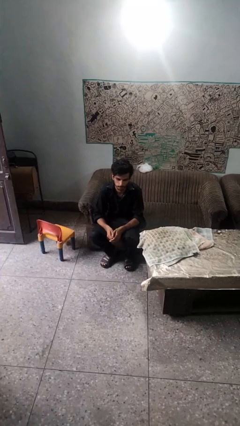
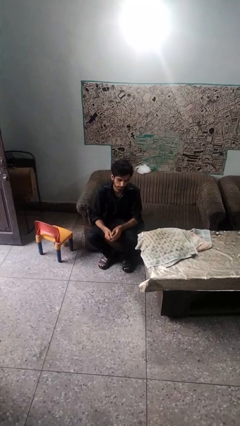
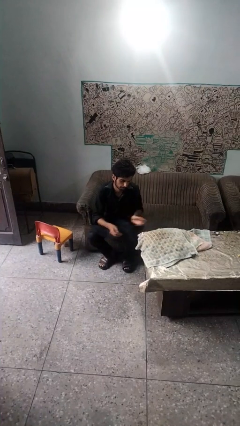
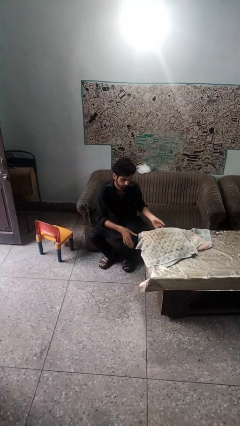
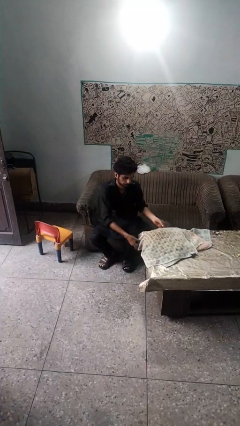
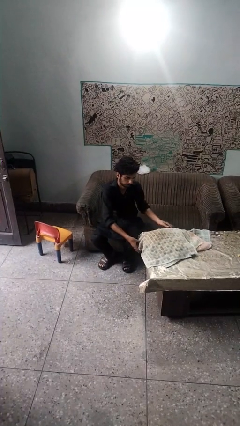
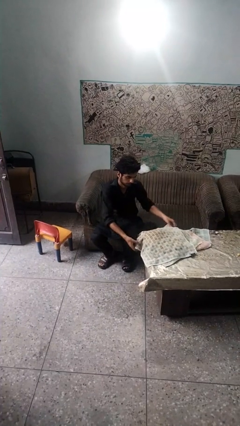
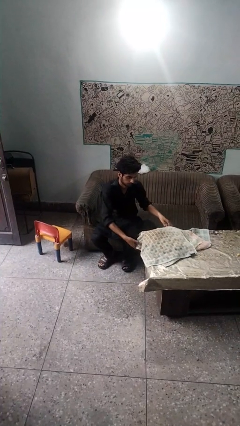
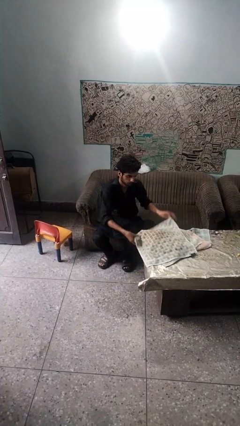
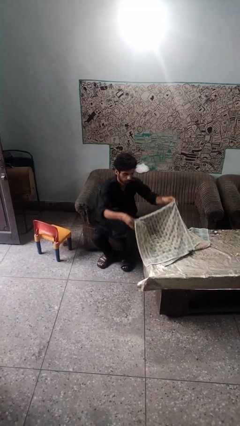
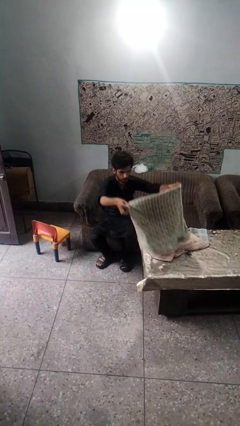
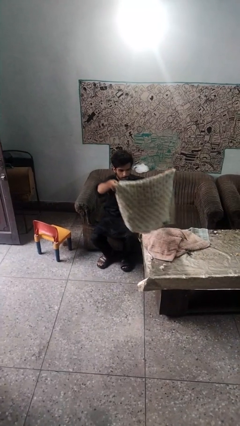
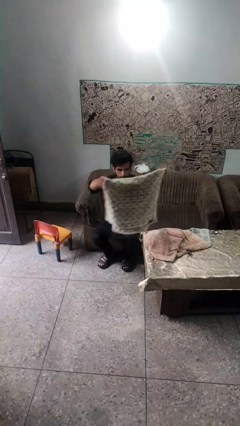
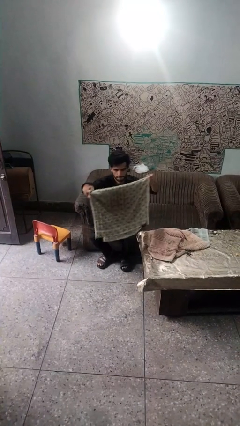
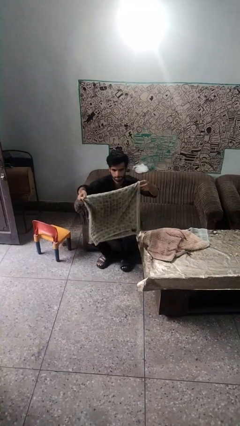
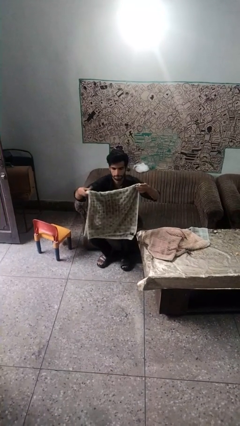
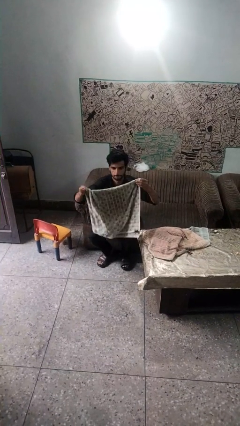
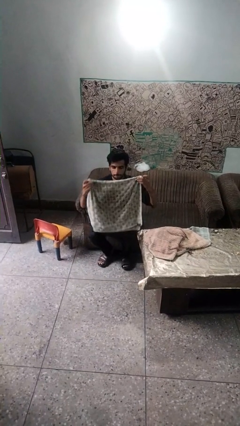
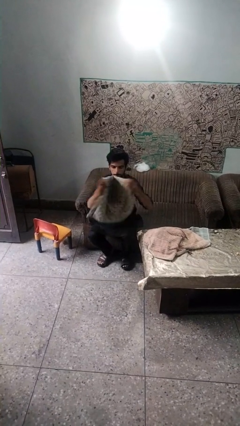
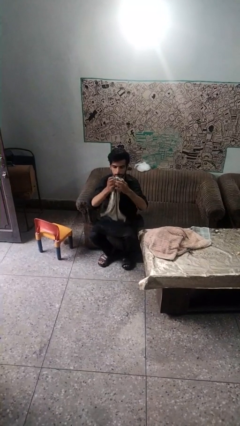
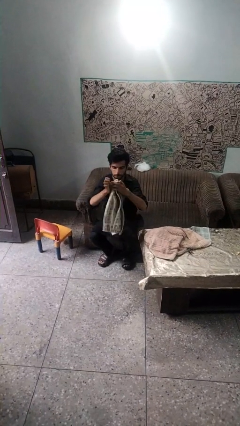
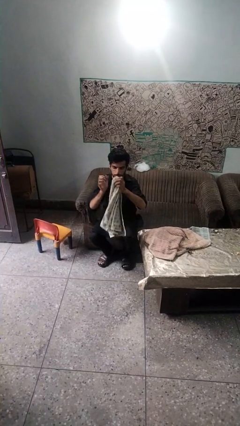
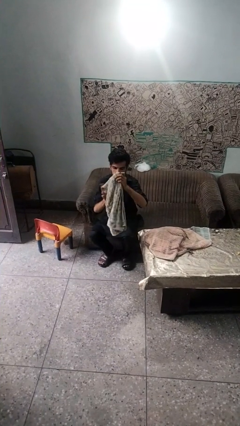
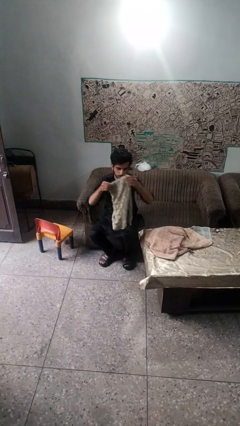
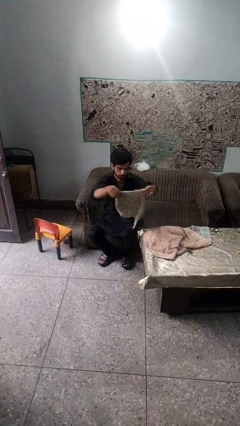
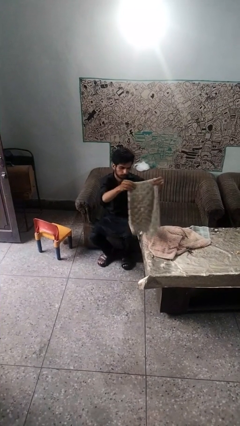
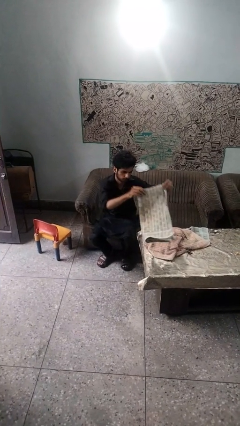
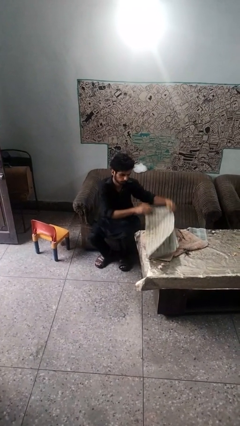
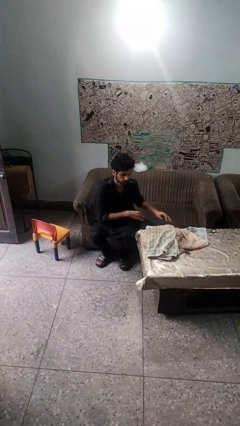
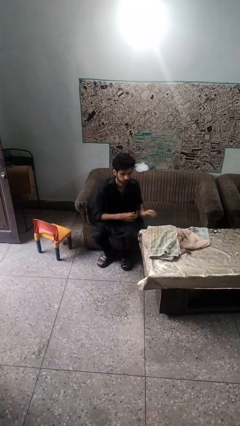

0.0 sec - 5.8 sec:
person folds towel

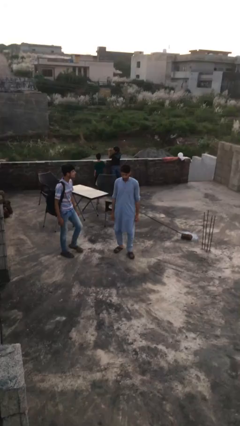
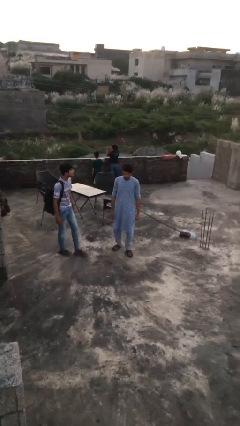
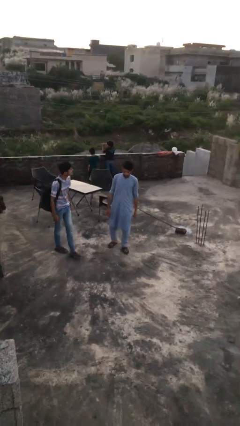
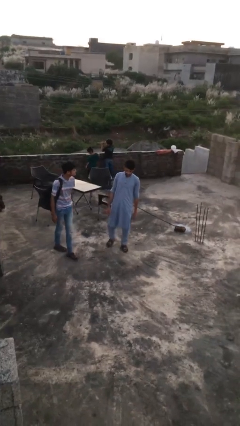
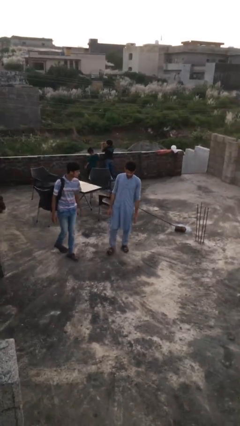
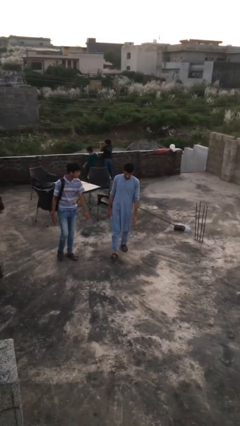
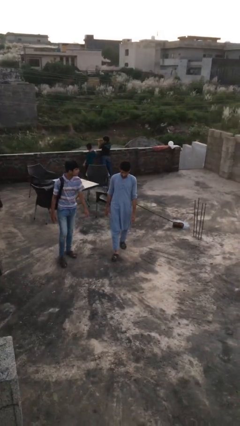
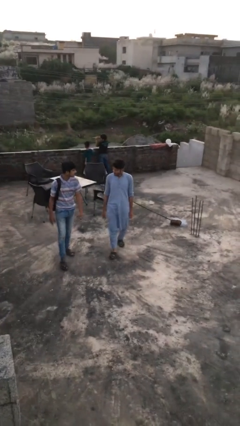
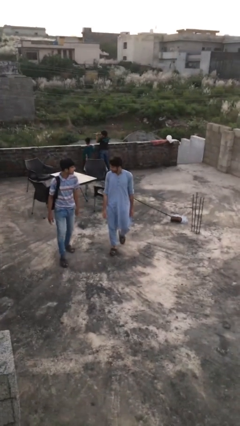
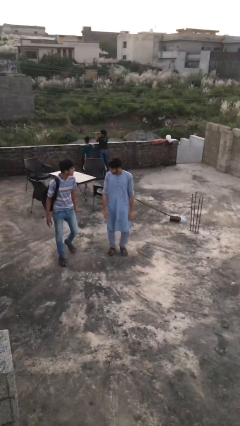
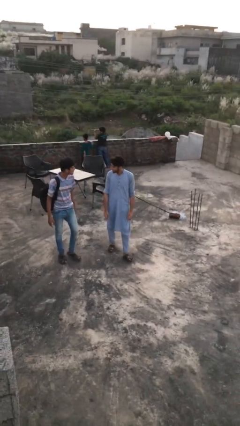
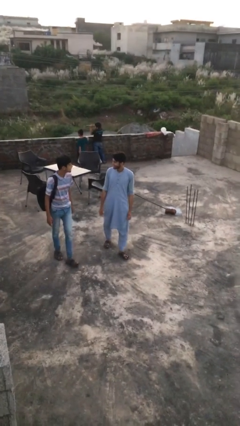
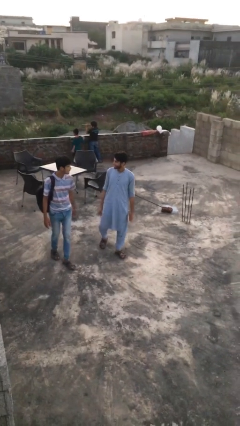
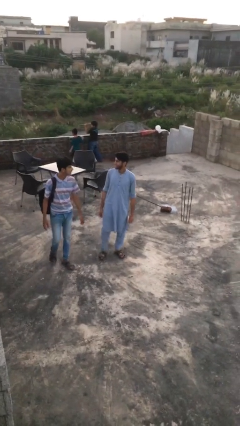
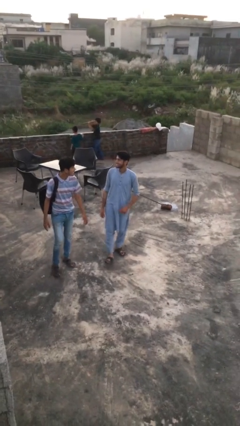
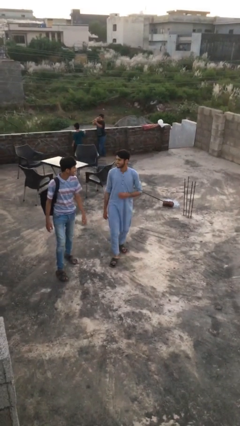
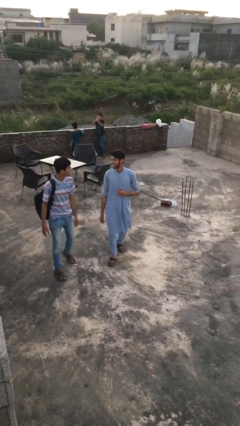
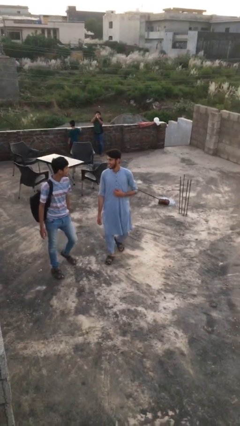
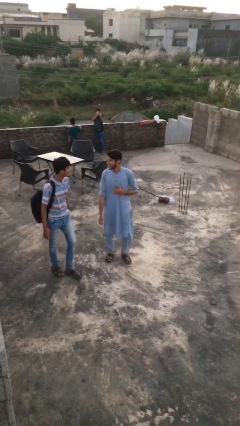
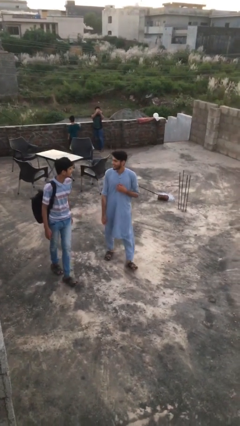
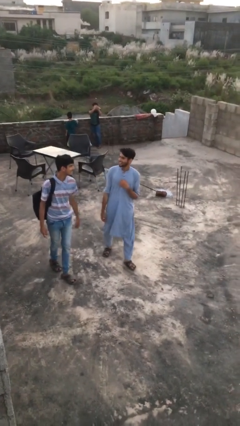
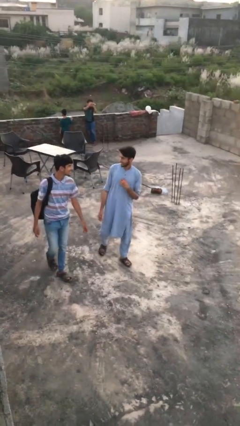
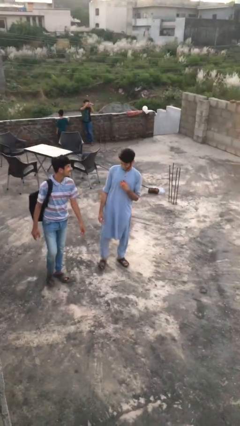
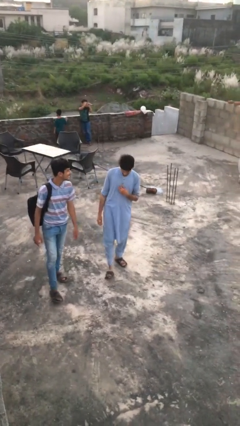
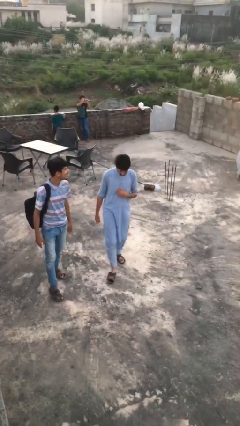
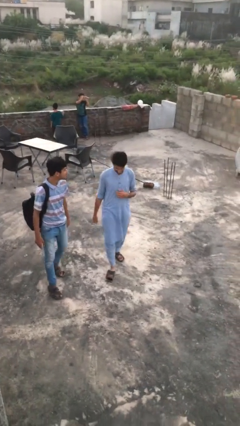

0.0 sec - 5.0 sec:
person talks to person

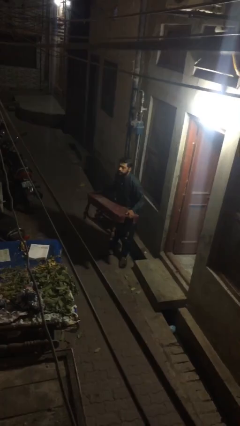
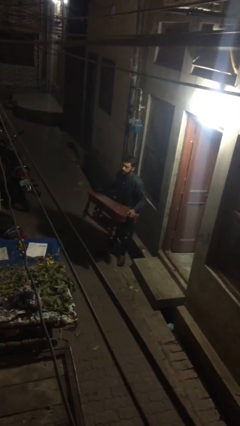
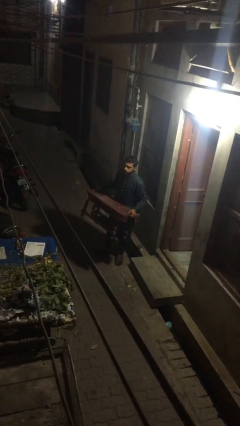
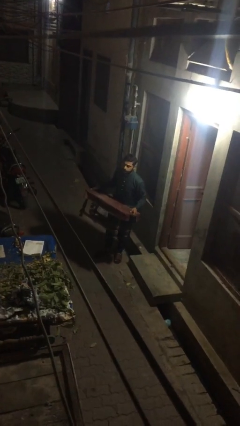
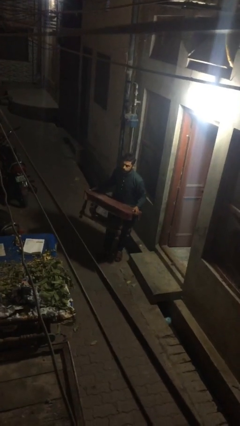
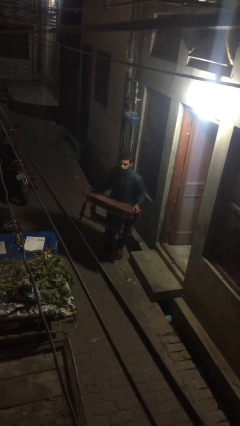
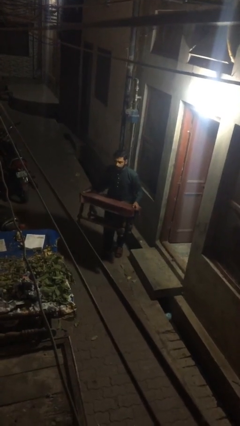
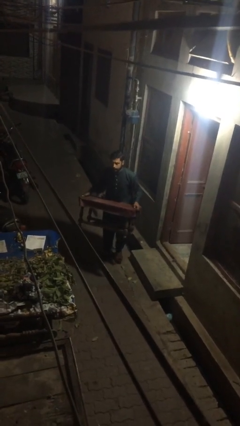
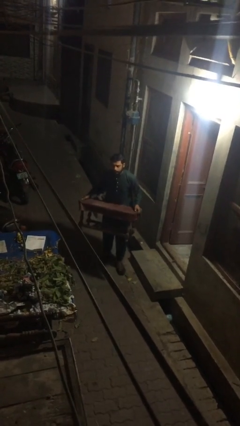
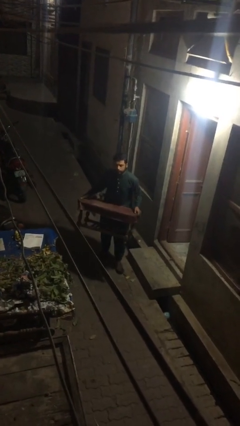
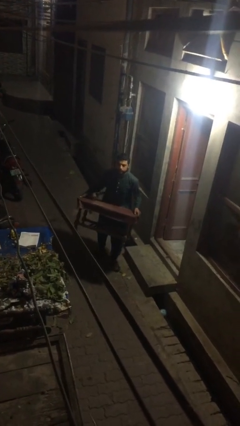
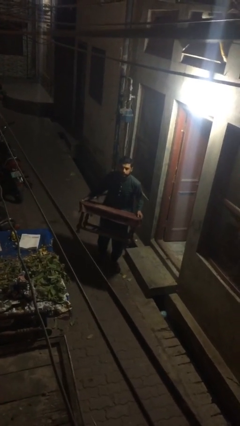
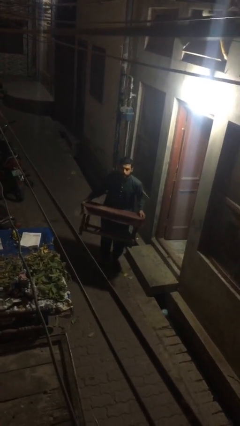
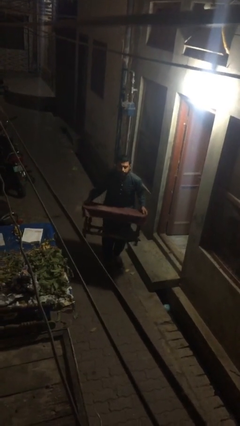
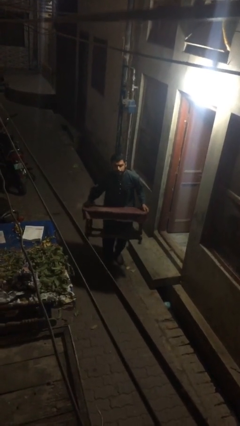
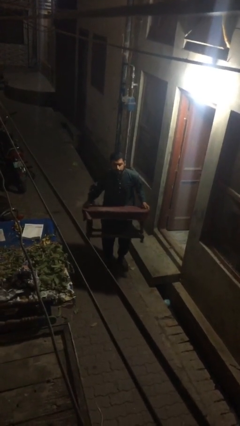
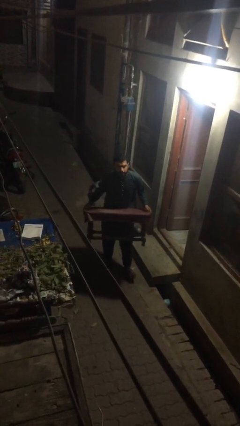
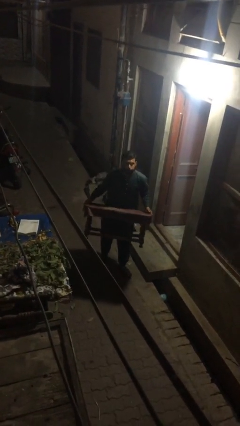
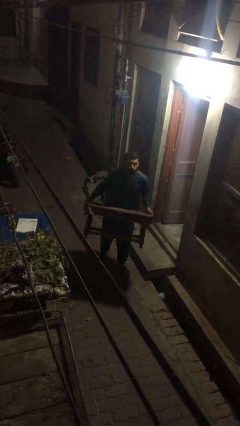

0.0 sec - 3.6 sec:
person carries heavy object

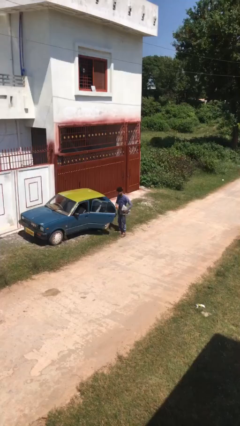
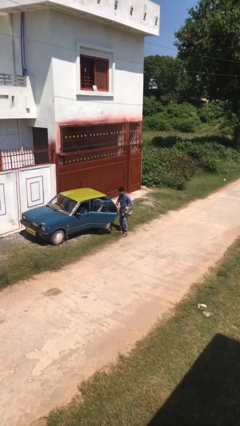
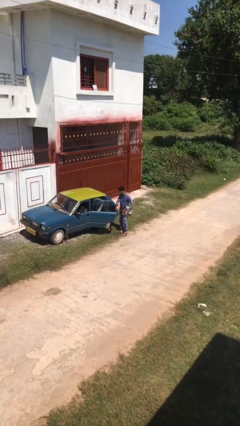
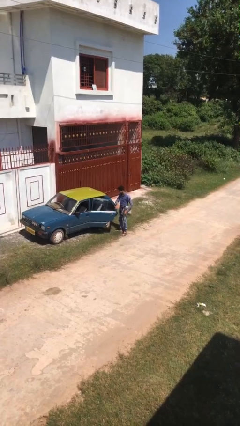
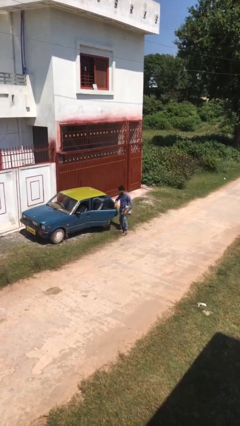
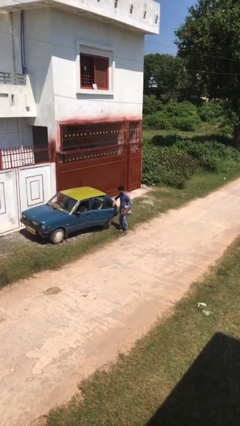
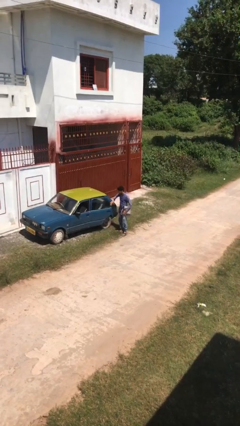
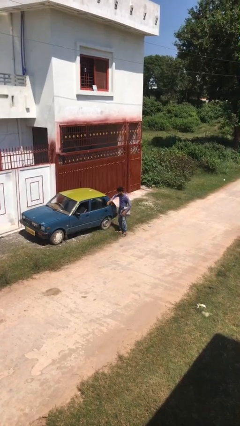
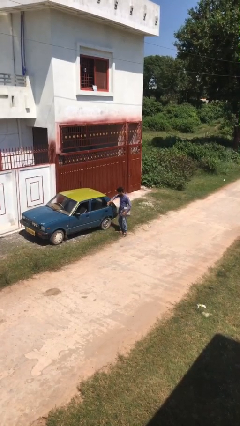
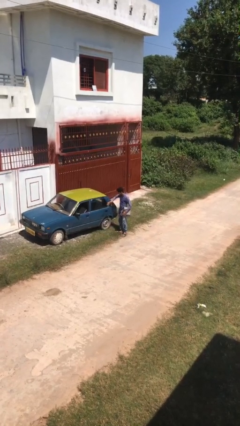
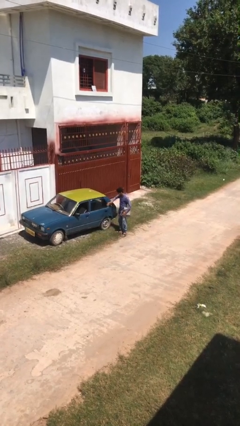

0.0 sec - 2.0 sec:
person closes car door

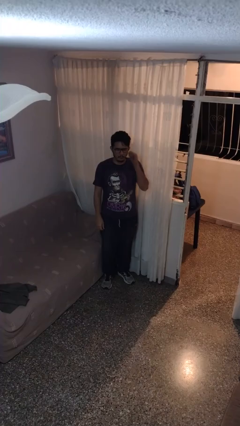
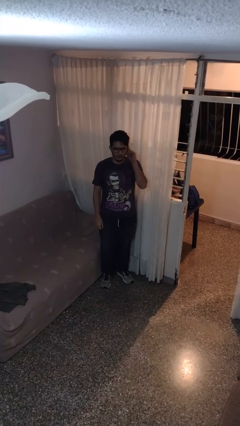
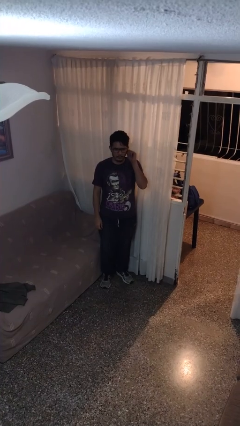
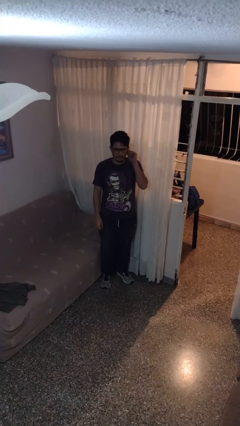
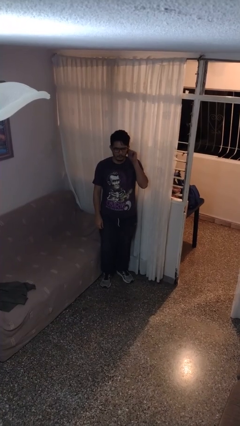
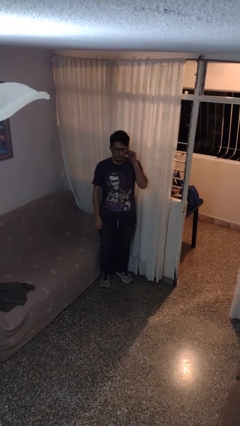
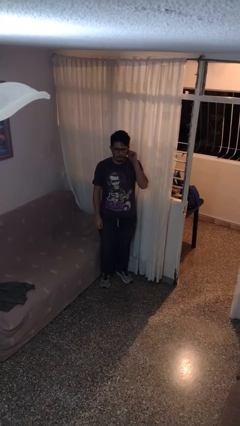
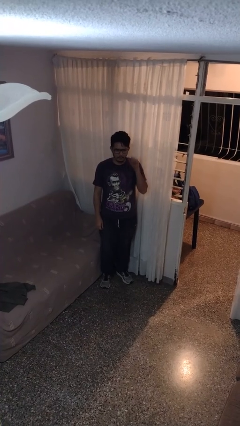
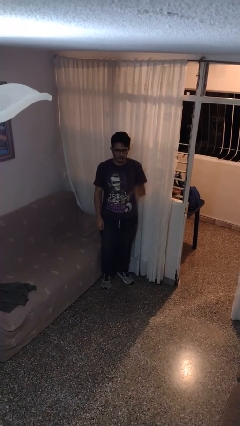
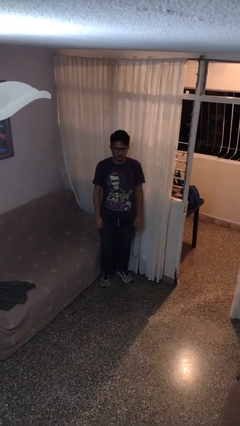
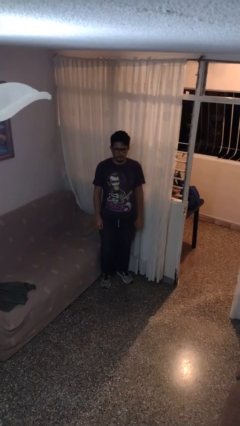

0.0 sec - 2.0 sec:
person touches earlobe
